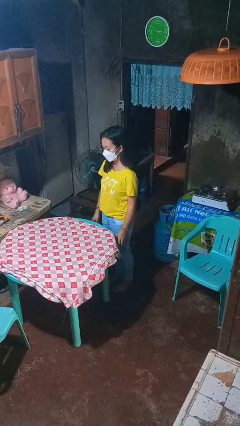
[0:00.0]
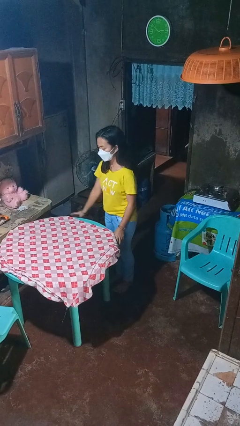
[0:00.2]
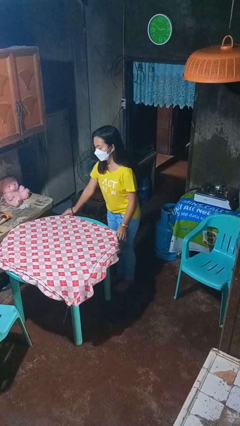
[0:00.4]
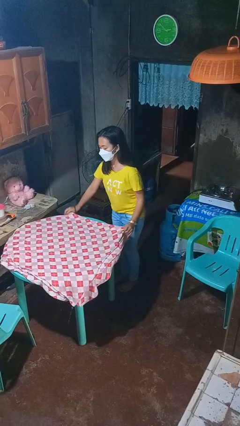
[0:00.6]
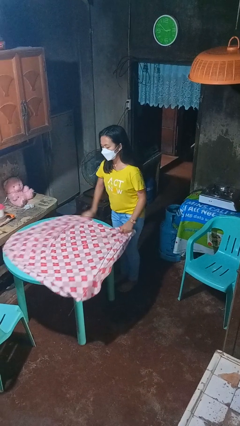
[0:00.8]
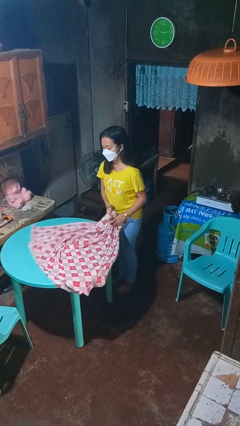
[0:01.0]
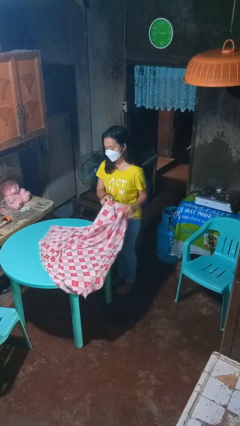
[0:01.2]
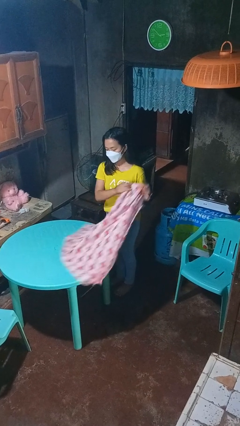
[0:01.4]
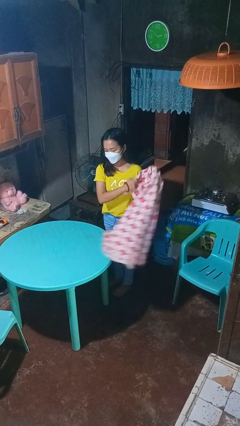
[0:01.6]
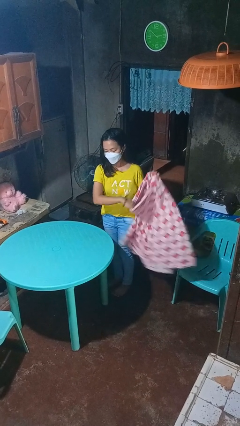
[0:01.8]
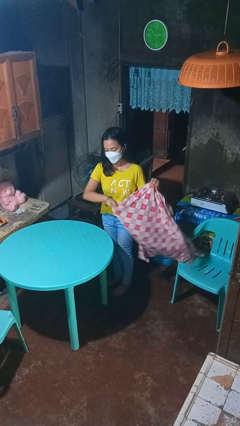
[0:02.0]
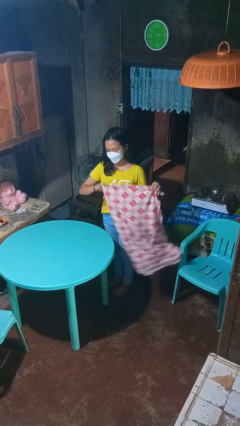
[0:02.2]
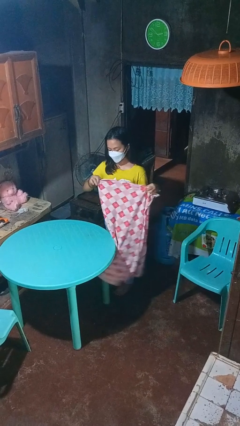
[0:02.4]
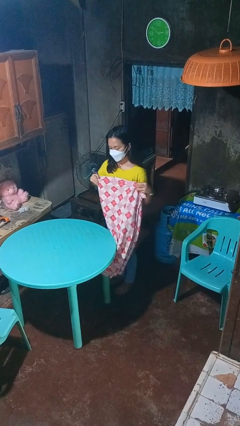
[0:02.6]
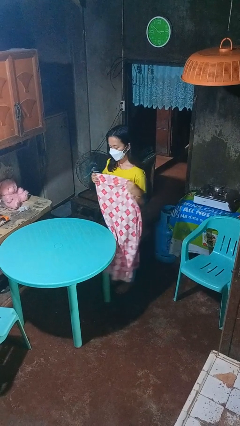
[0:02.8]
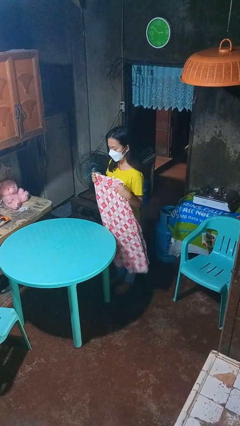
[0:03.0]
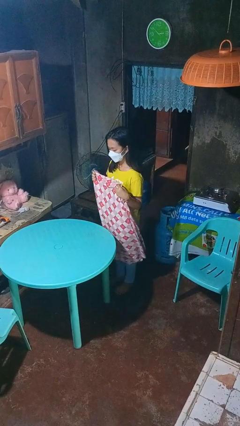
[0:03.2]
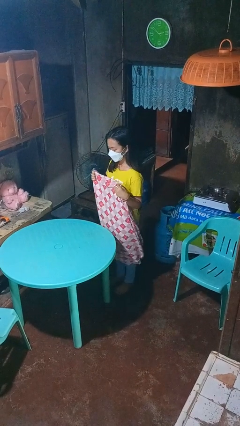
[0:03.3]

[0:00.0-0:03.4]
person folds tablecloth

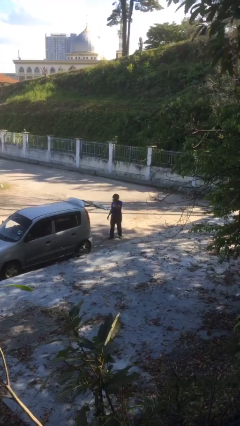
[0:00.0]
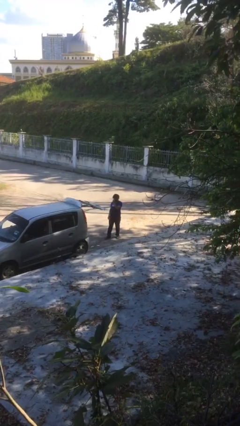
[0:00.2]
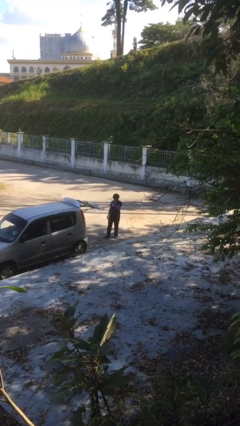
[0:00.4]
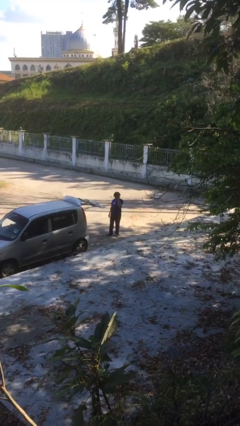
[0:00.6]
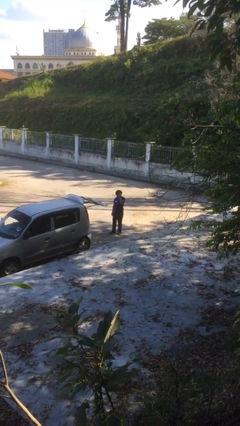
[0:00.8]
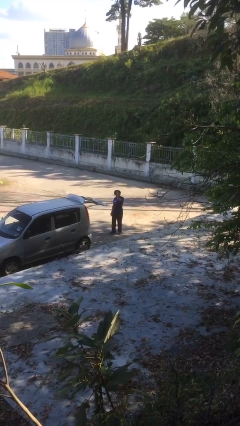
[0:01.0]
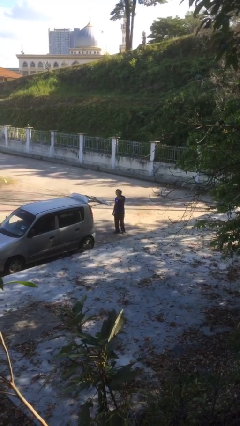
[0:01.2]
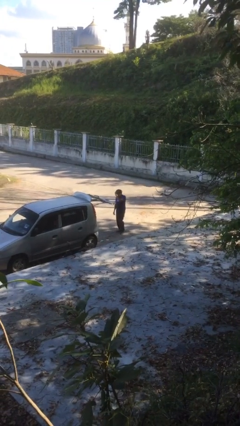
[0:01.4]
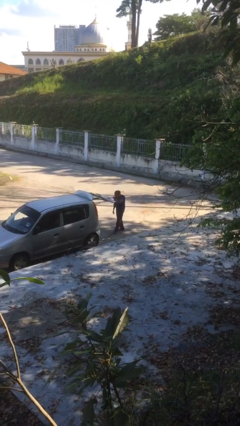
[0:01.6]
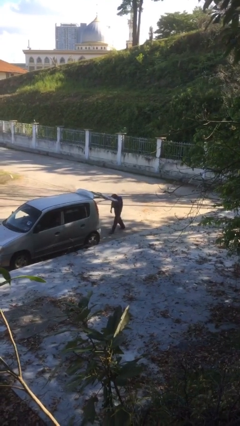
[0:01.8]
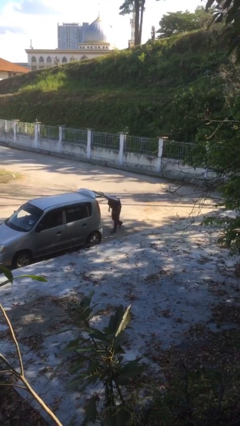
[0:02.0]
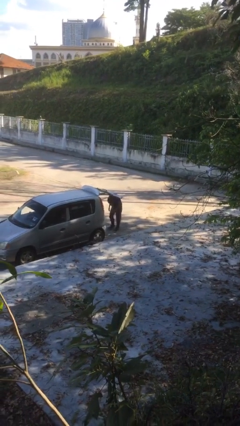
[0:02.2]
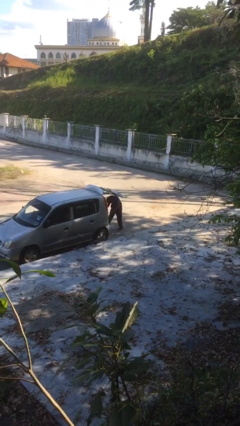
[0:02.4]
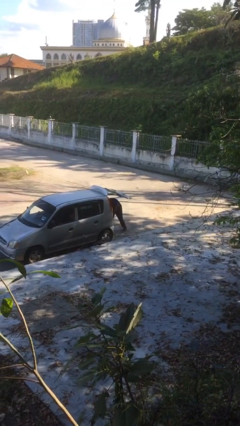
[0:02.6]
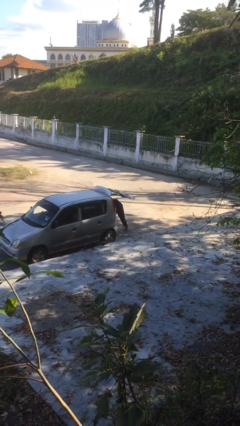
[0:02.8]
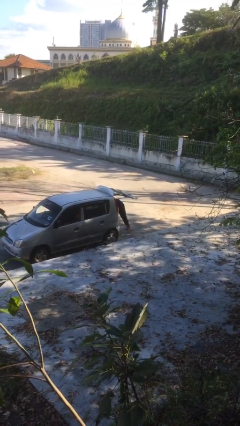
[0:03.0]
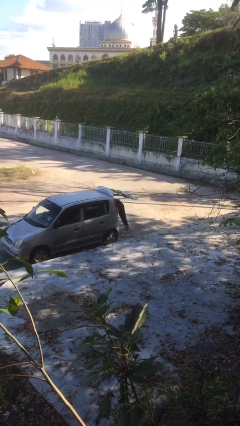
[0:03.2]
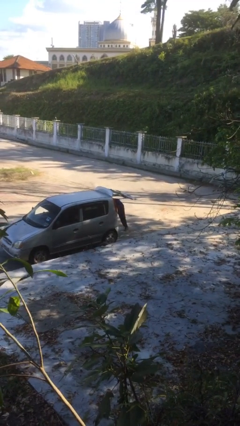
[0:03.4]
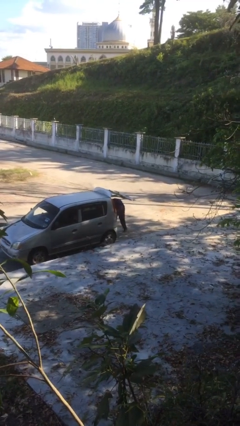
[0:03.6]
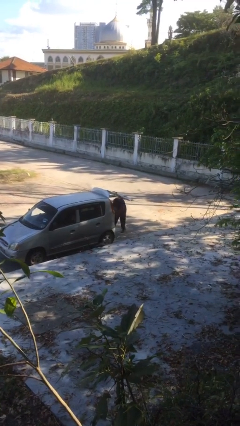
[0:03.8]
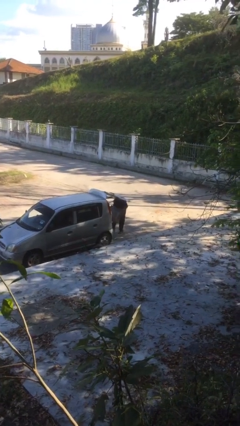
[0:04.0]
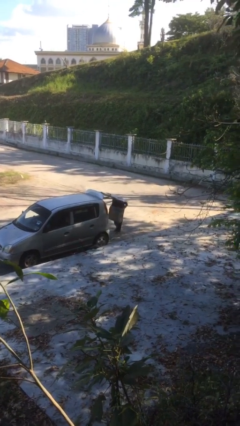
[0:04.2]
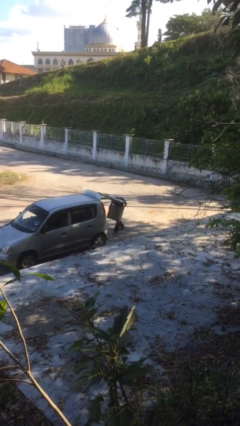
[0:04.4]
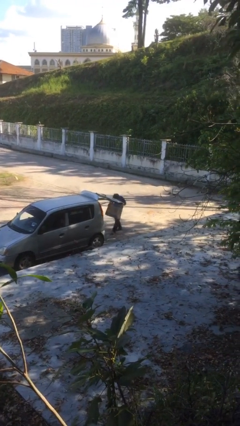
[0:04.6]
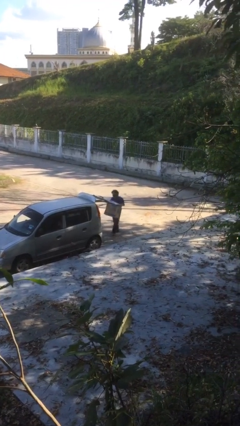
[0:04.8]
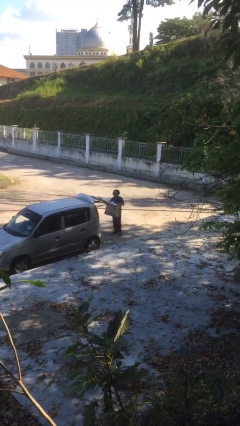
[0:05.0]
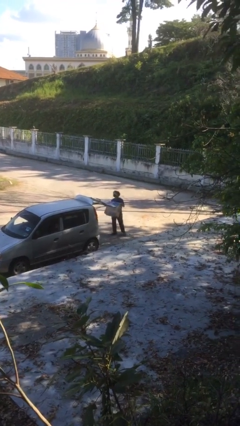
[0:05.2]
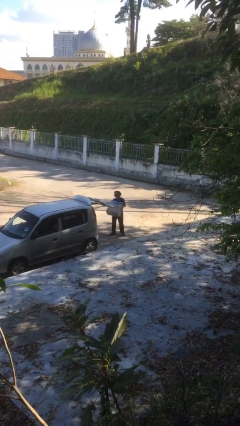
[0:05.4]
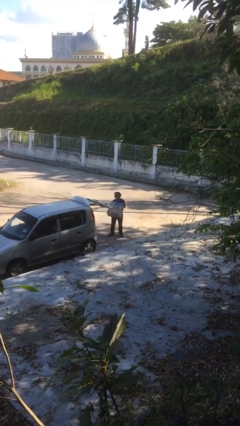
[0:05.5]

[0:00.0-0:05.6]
person unloads car

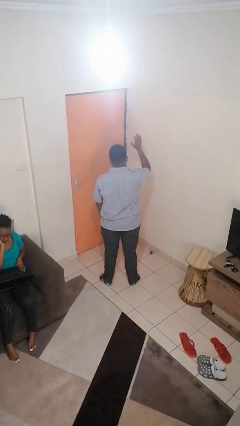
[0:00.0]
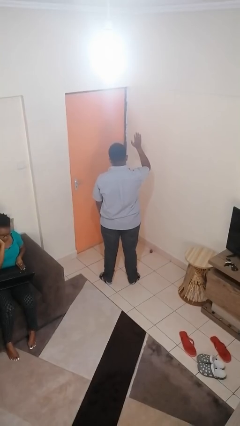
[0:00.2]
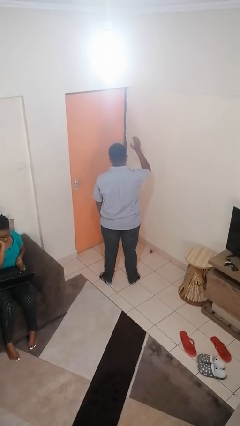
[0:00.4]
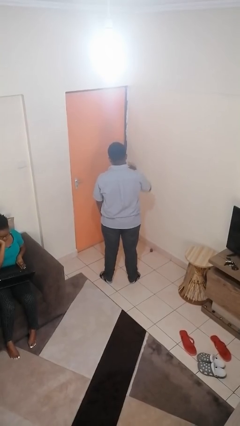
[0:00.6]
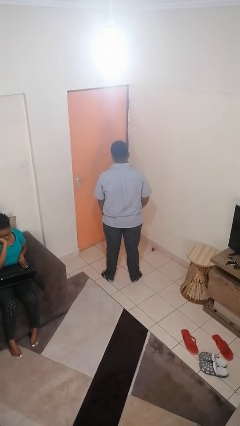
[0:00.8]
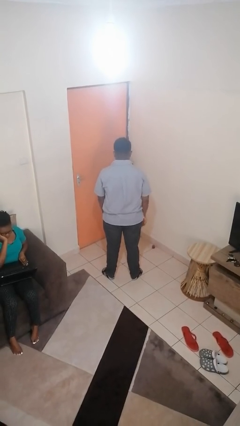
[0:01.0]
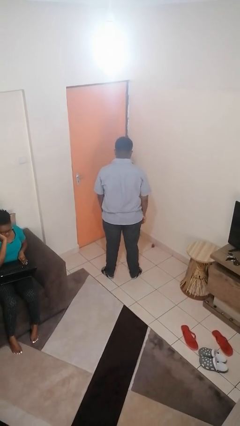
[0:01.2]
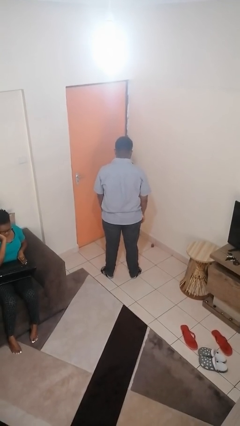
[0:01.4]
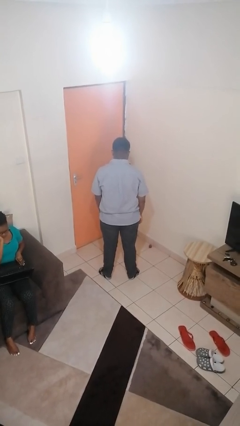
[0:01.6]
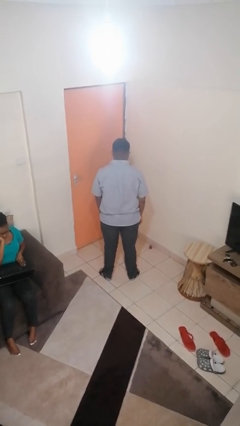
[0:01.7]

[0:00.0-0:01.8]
person gestures lower hand

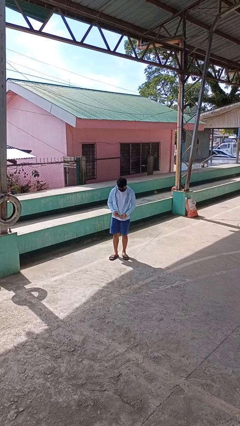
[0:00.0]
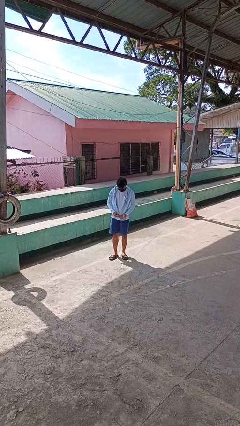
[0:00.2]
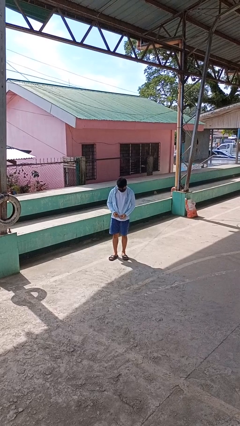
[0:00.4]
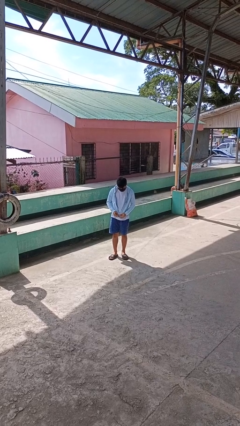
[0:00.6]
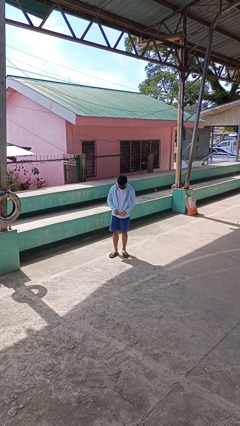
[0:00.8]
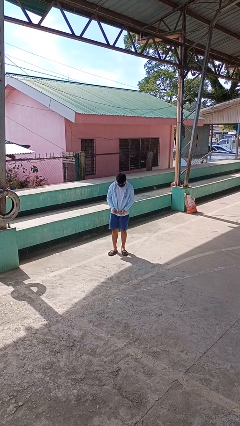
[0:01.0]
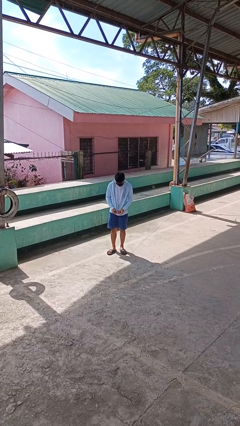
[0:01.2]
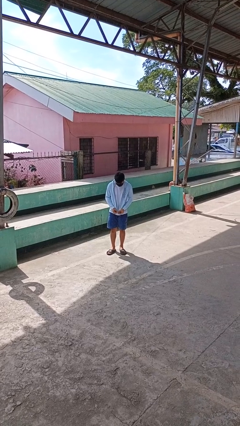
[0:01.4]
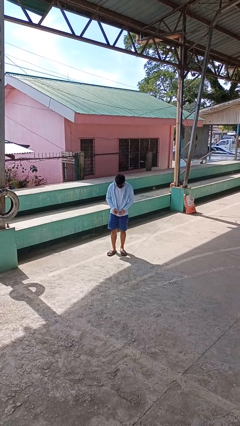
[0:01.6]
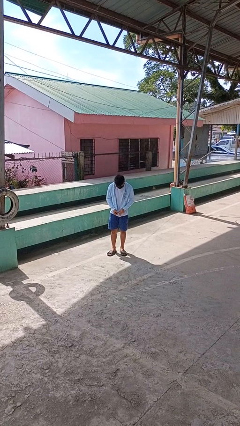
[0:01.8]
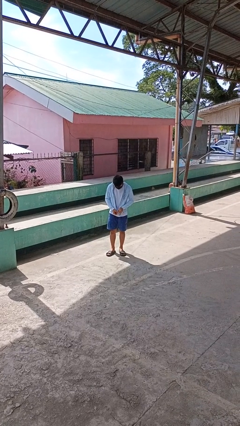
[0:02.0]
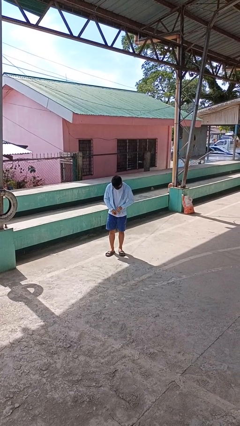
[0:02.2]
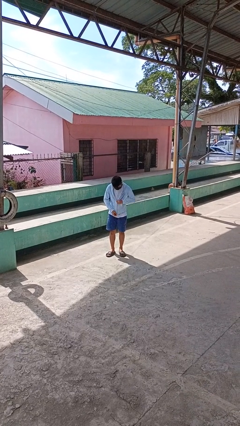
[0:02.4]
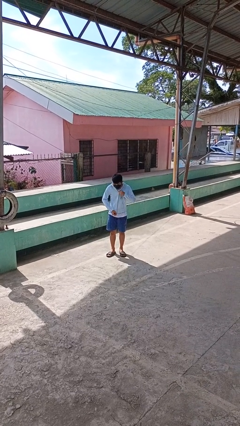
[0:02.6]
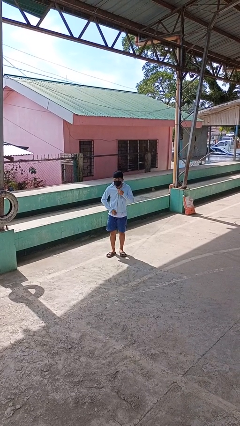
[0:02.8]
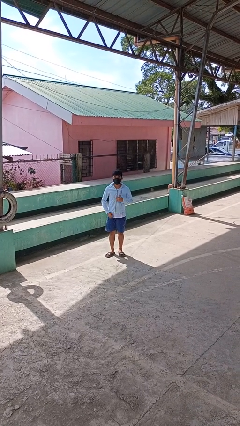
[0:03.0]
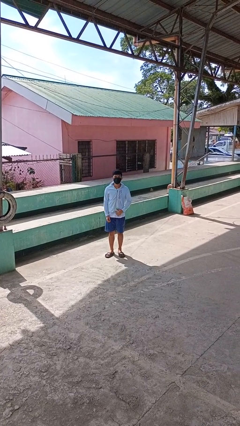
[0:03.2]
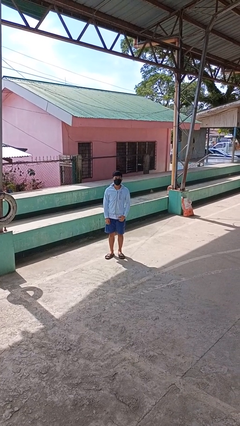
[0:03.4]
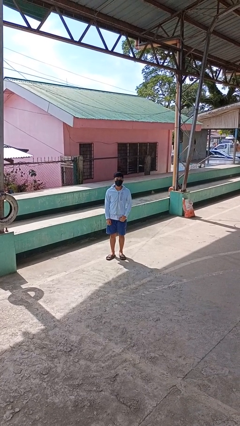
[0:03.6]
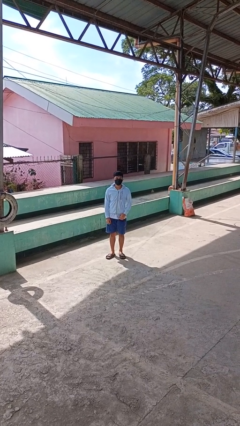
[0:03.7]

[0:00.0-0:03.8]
person zips up jacket

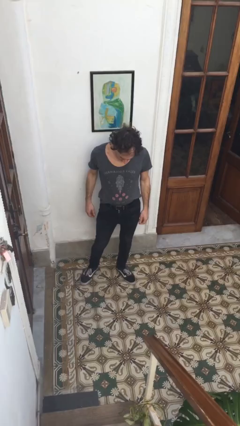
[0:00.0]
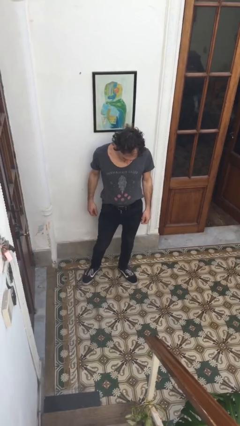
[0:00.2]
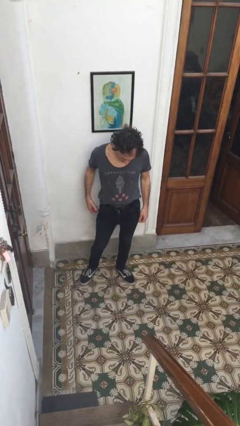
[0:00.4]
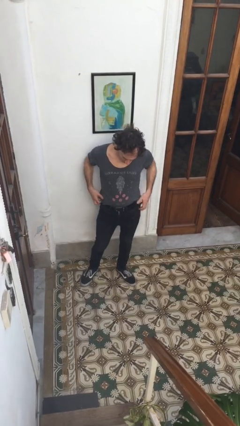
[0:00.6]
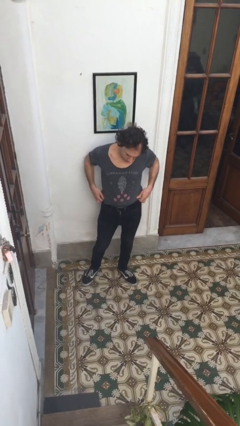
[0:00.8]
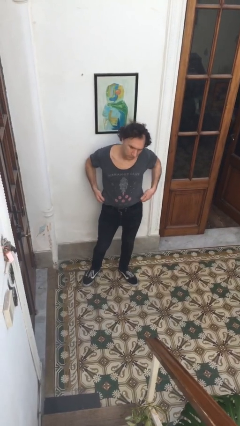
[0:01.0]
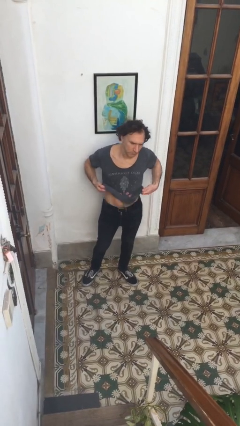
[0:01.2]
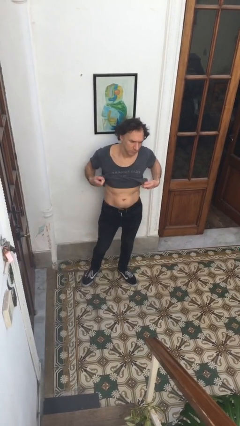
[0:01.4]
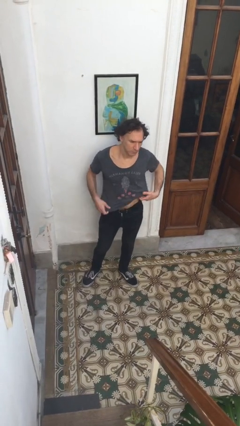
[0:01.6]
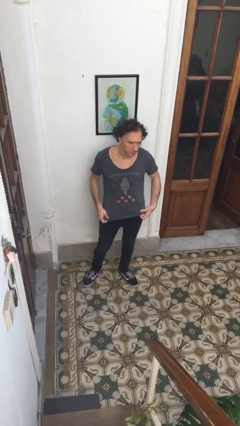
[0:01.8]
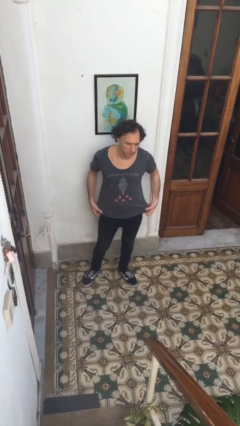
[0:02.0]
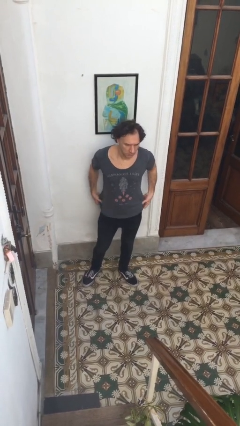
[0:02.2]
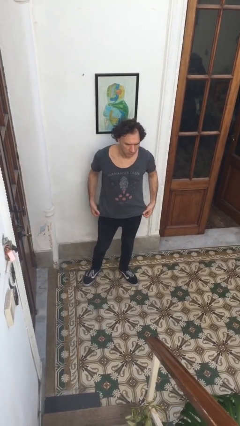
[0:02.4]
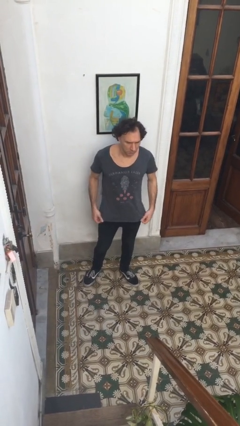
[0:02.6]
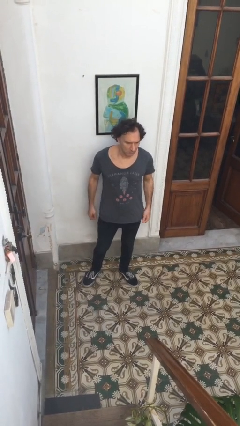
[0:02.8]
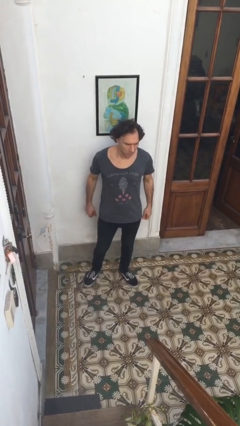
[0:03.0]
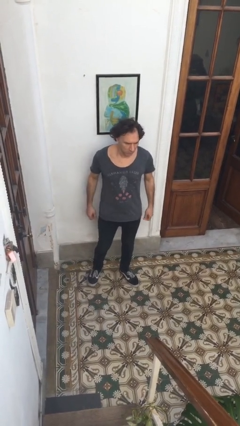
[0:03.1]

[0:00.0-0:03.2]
person untucks shirt
